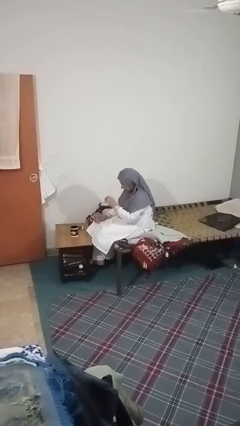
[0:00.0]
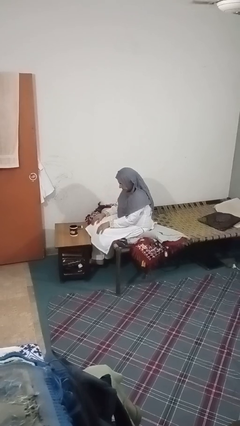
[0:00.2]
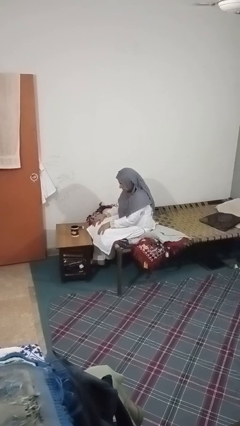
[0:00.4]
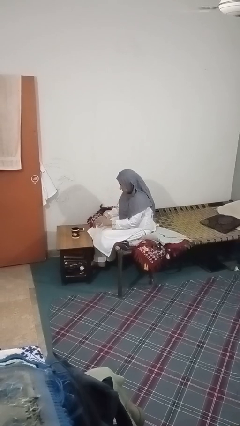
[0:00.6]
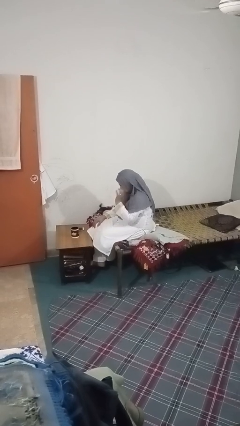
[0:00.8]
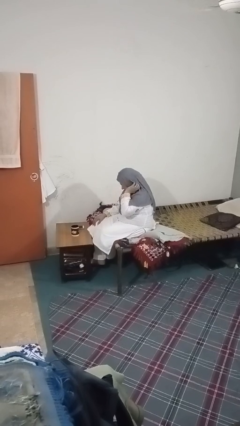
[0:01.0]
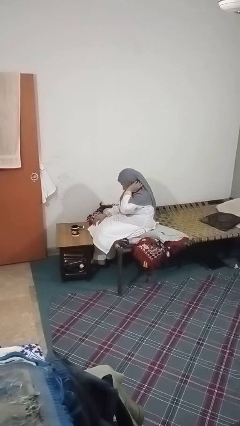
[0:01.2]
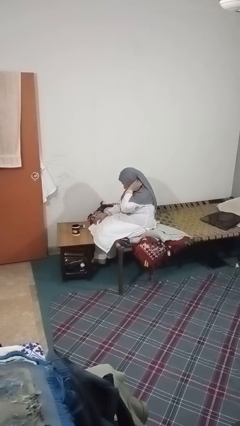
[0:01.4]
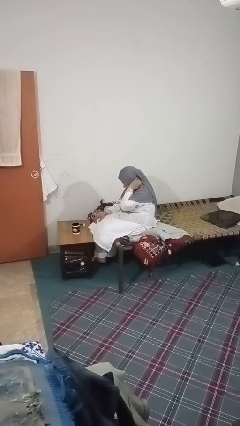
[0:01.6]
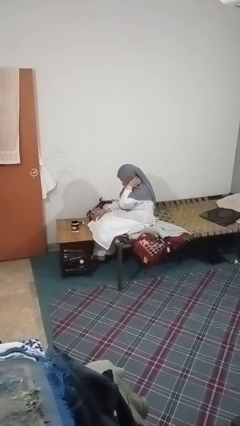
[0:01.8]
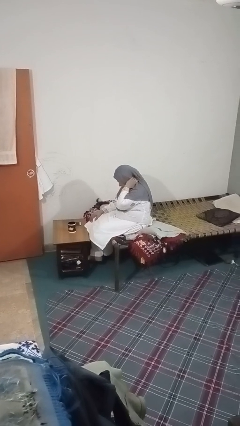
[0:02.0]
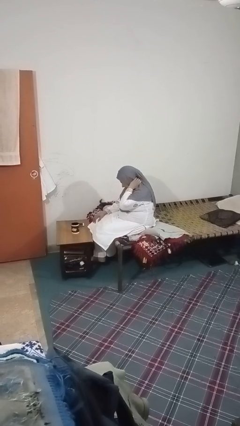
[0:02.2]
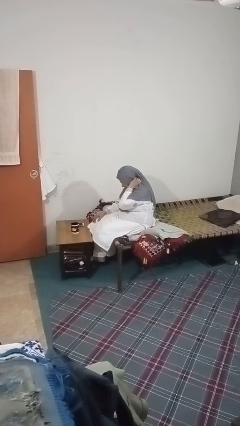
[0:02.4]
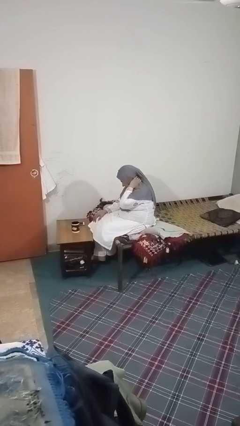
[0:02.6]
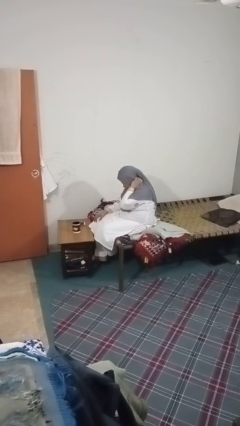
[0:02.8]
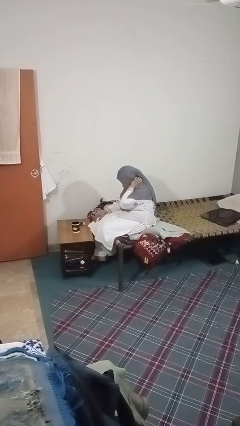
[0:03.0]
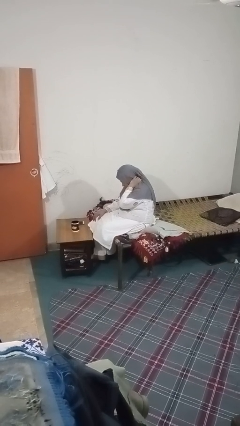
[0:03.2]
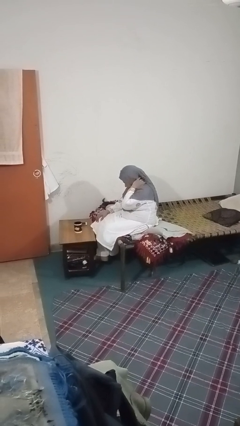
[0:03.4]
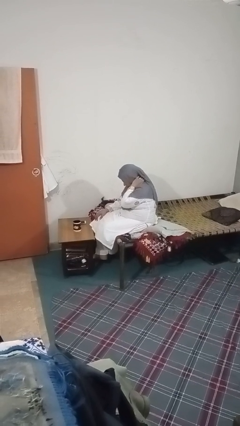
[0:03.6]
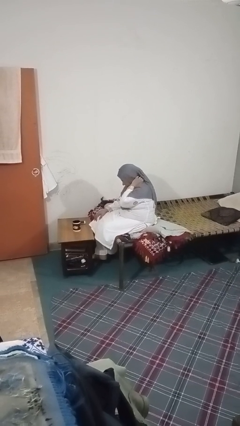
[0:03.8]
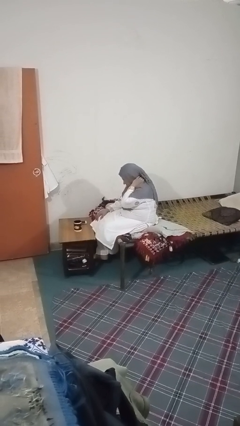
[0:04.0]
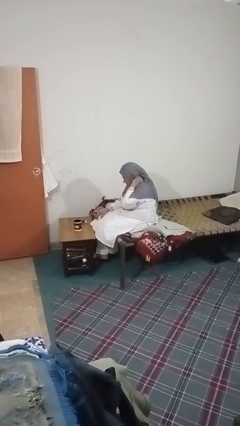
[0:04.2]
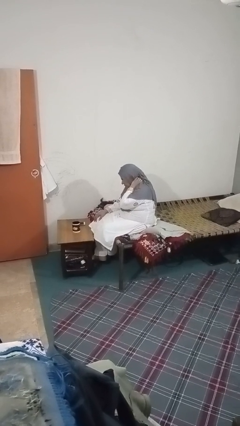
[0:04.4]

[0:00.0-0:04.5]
person rubs neck

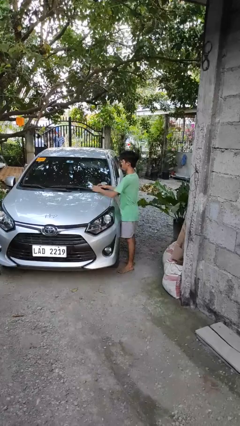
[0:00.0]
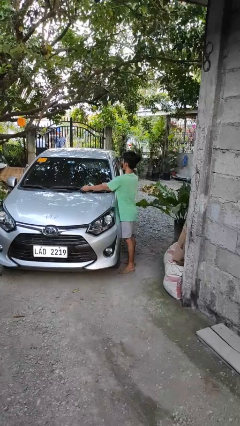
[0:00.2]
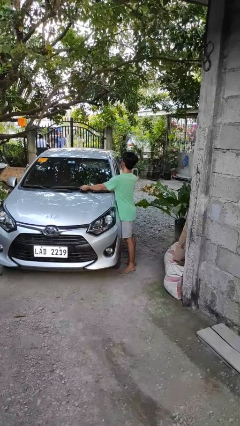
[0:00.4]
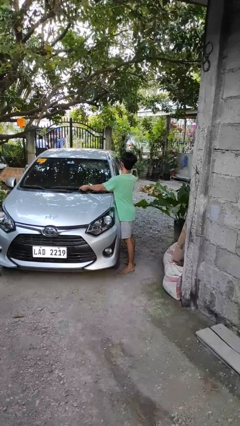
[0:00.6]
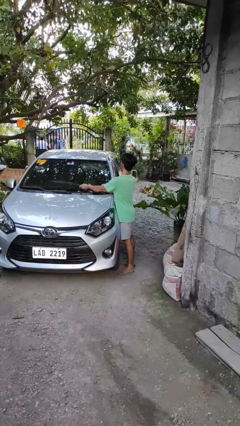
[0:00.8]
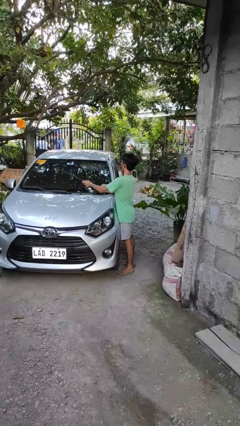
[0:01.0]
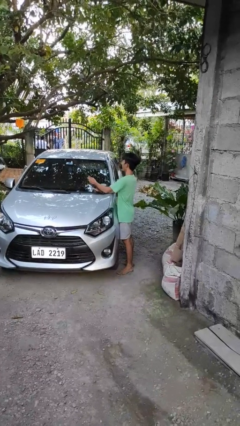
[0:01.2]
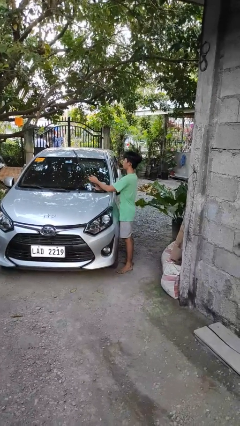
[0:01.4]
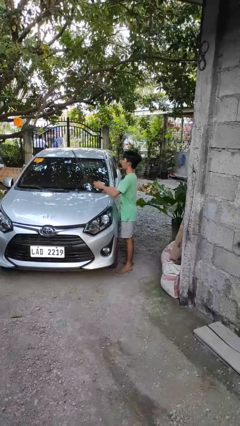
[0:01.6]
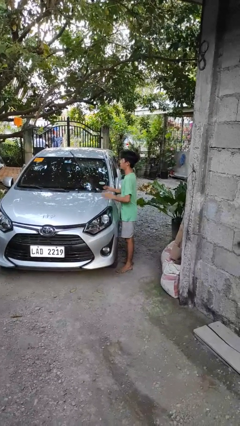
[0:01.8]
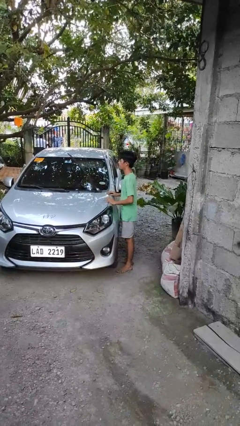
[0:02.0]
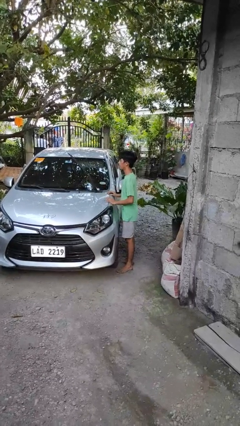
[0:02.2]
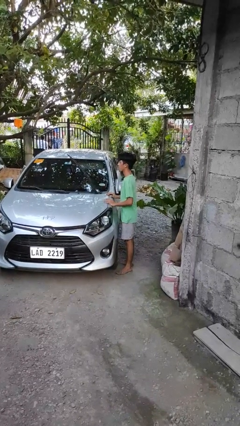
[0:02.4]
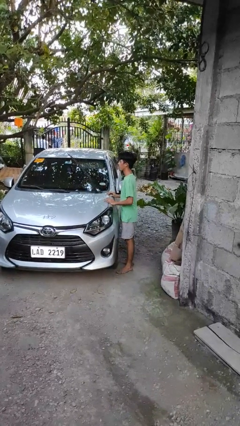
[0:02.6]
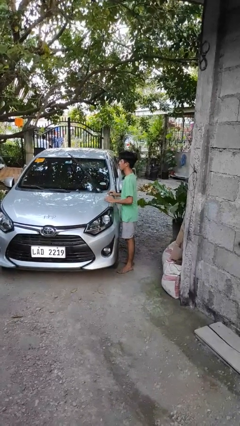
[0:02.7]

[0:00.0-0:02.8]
person flips up car wipers

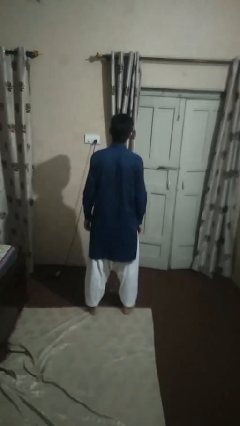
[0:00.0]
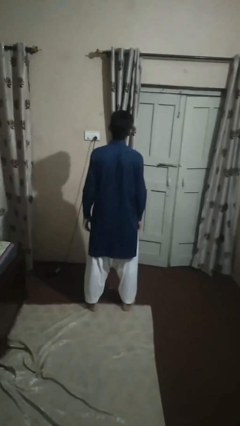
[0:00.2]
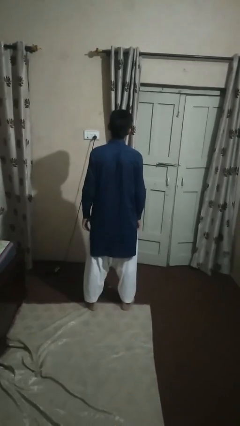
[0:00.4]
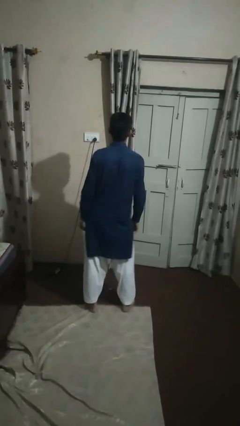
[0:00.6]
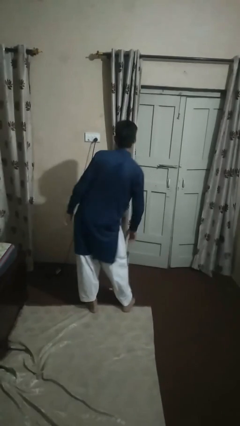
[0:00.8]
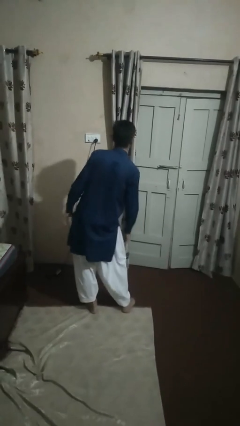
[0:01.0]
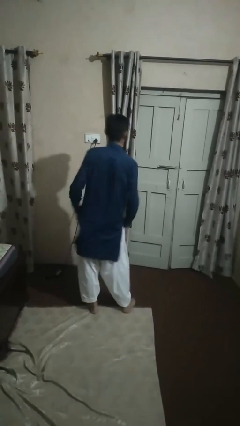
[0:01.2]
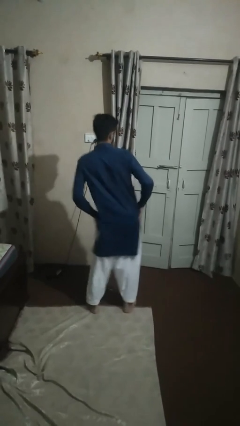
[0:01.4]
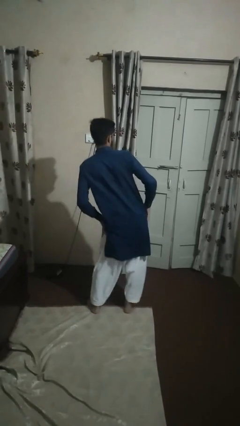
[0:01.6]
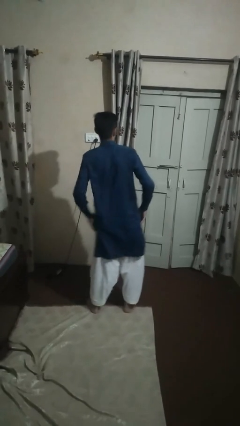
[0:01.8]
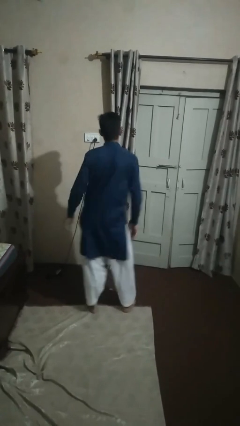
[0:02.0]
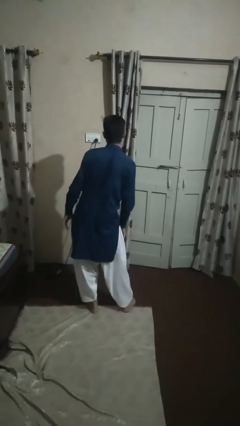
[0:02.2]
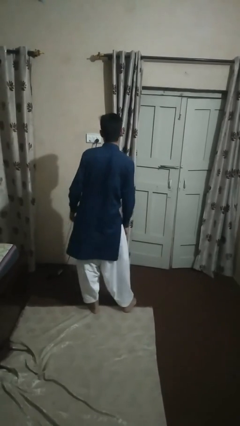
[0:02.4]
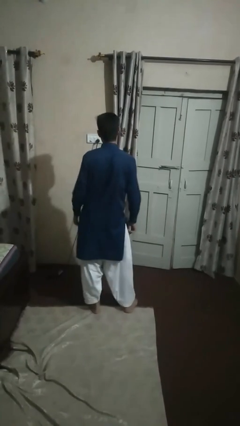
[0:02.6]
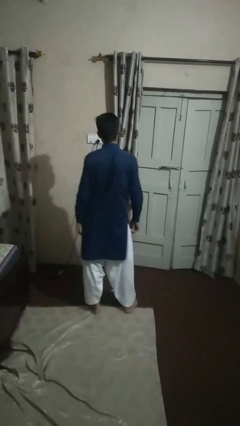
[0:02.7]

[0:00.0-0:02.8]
person wiggles hips

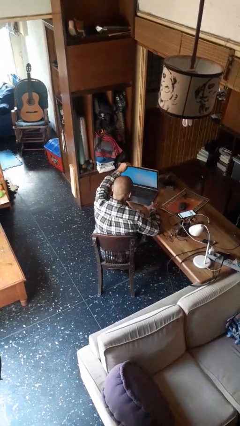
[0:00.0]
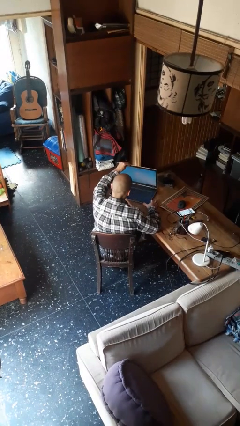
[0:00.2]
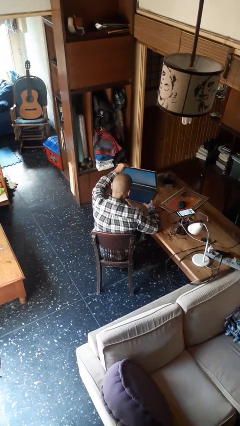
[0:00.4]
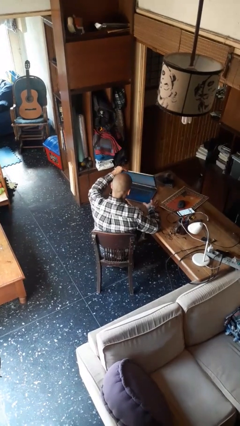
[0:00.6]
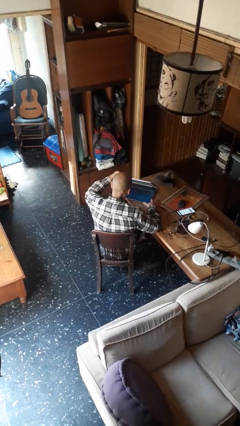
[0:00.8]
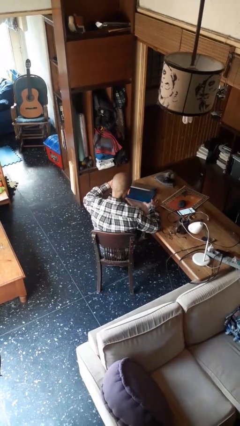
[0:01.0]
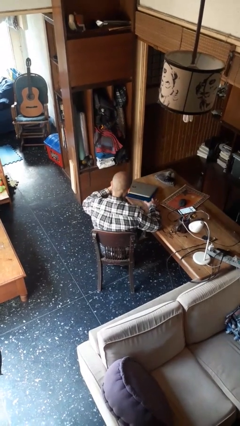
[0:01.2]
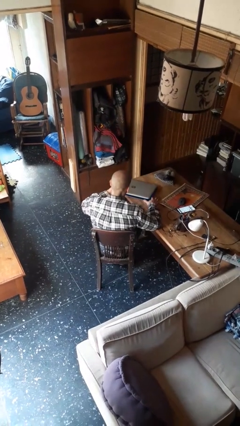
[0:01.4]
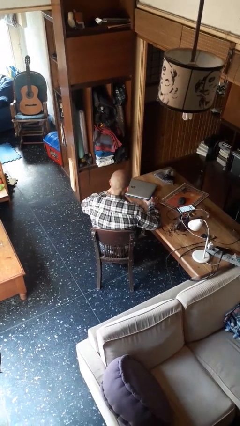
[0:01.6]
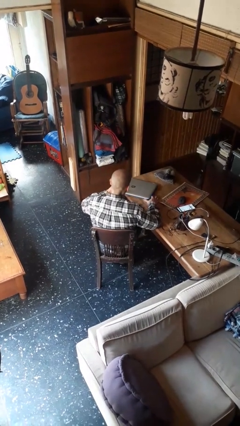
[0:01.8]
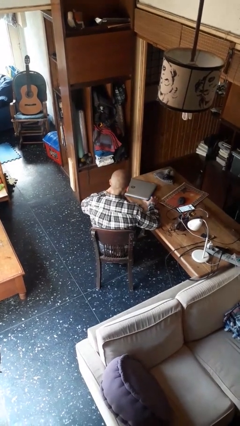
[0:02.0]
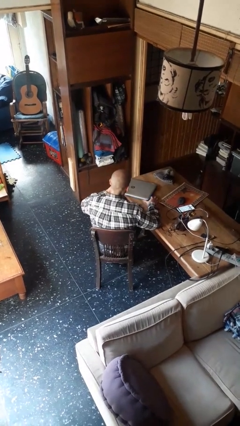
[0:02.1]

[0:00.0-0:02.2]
person closes laptop

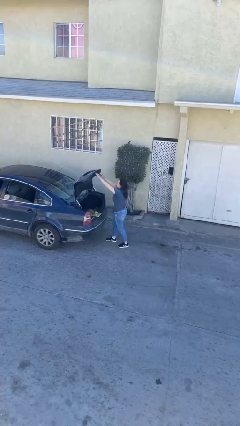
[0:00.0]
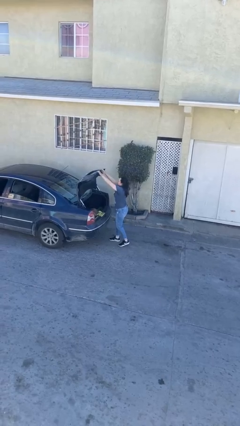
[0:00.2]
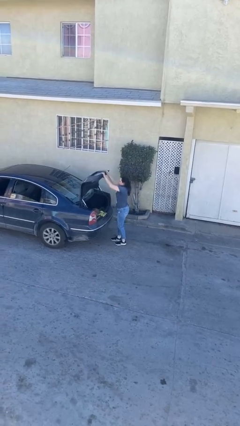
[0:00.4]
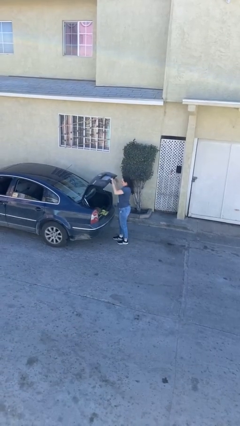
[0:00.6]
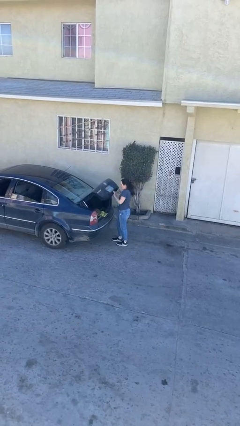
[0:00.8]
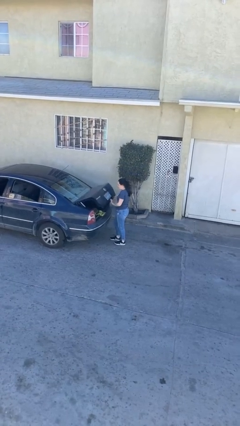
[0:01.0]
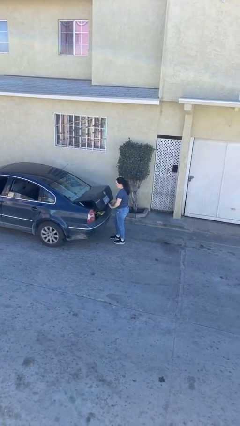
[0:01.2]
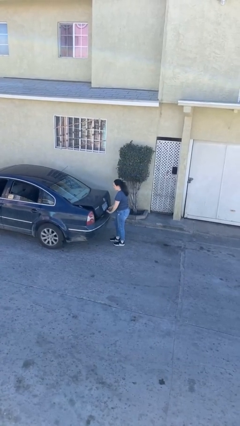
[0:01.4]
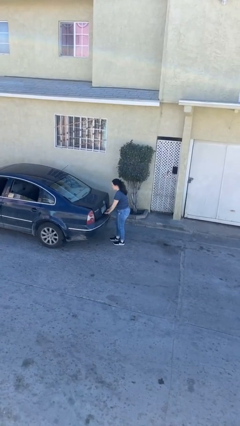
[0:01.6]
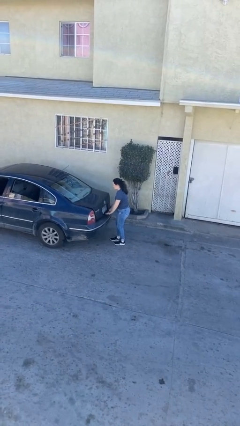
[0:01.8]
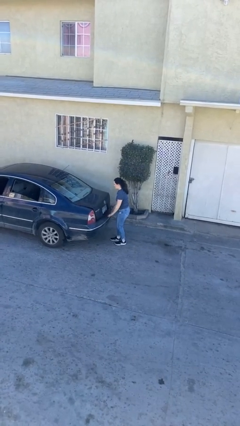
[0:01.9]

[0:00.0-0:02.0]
person closes car trunk

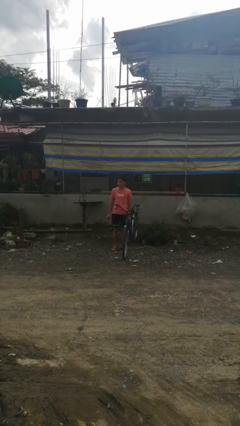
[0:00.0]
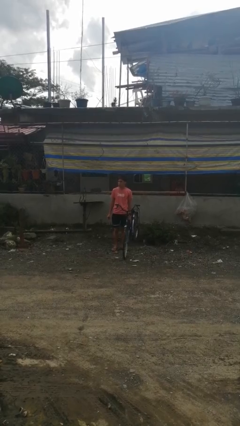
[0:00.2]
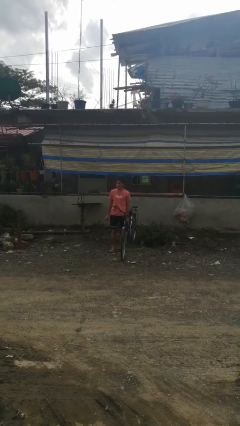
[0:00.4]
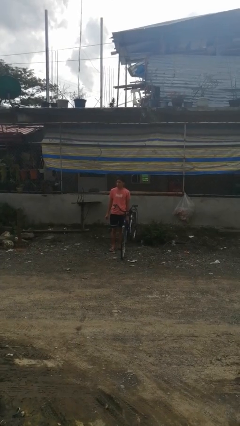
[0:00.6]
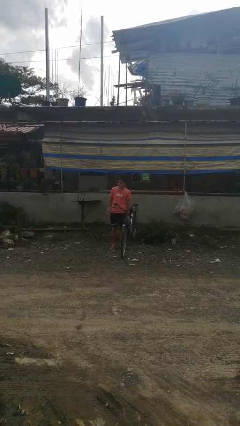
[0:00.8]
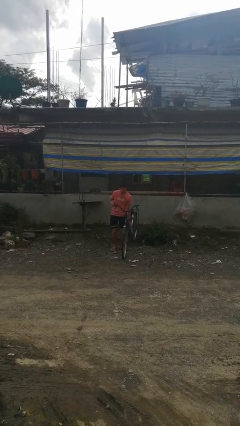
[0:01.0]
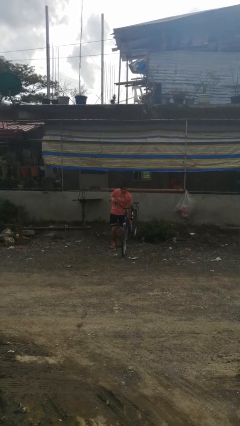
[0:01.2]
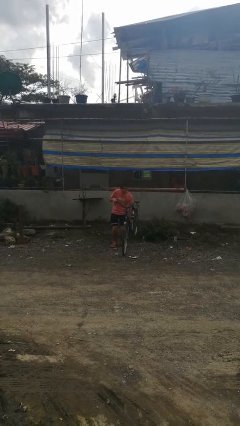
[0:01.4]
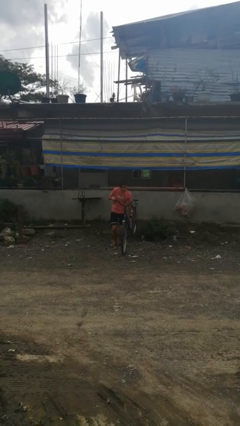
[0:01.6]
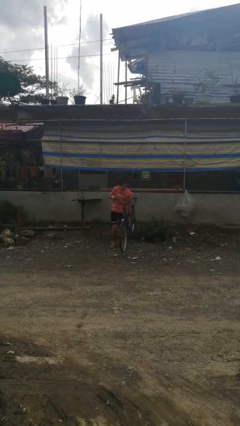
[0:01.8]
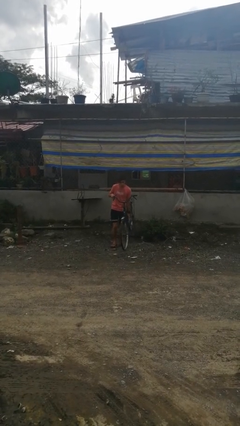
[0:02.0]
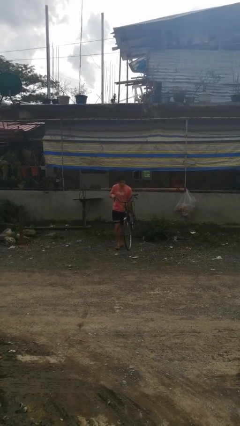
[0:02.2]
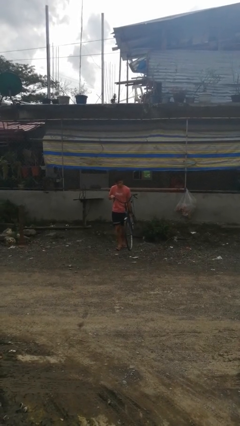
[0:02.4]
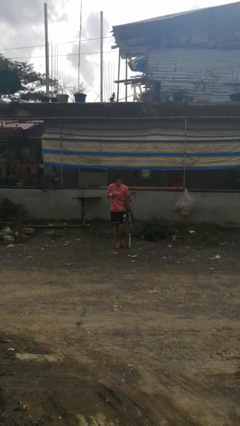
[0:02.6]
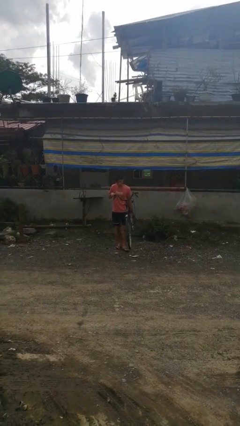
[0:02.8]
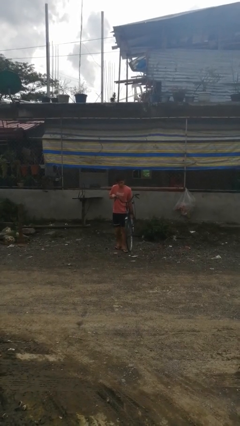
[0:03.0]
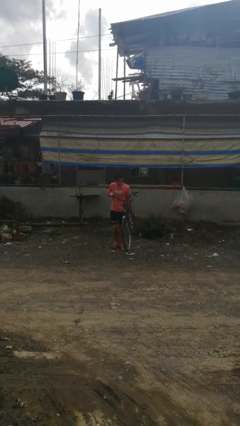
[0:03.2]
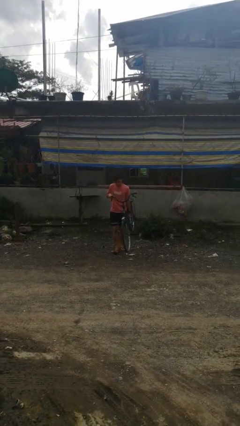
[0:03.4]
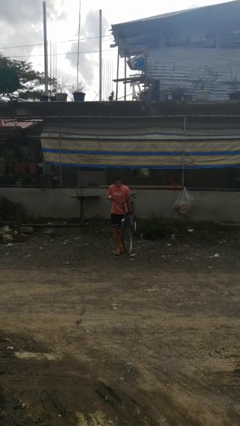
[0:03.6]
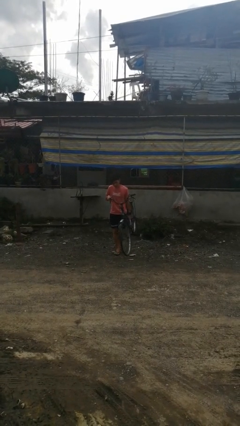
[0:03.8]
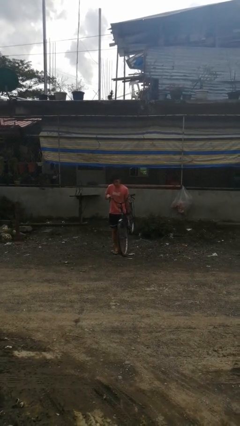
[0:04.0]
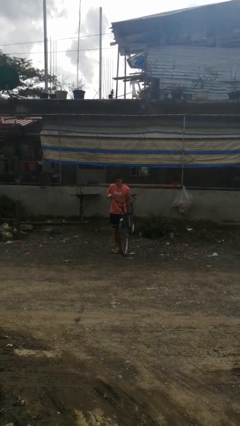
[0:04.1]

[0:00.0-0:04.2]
person carries bicycle
